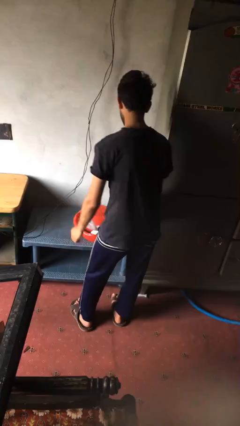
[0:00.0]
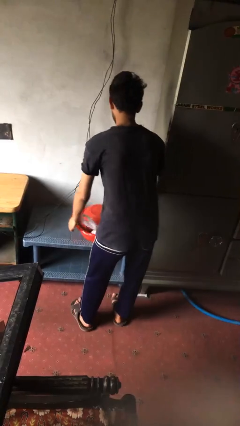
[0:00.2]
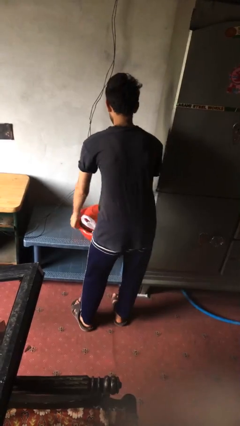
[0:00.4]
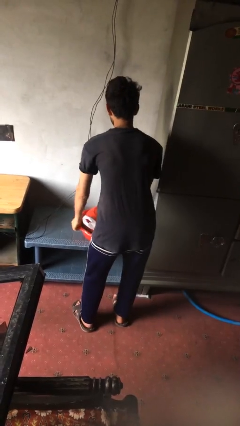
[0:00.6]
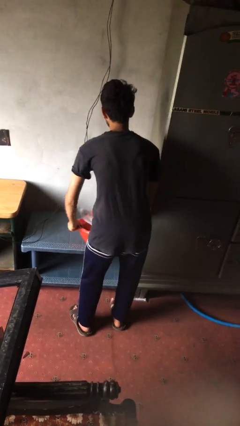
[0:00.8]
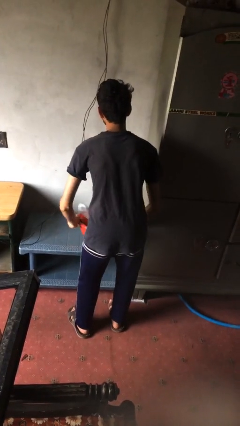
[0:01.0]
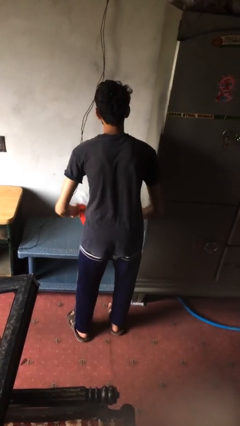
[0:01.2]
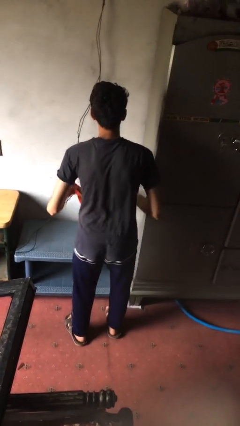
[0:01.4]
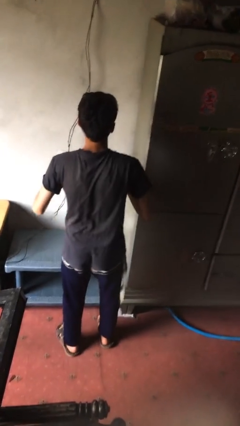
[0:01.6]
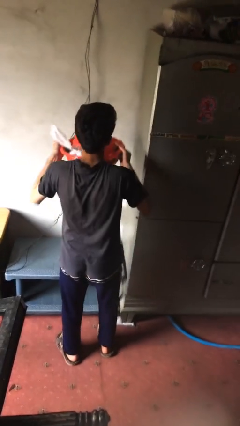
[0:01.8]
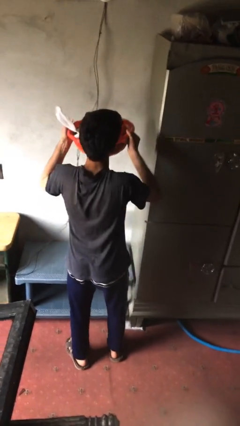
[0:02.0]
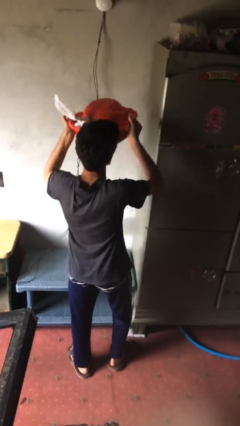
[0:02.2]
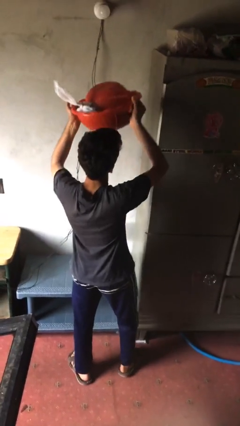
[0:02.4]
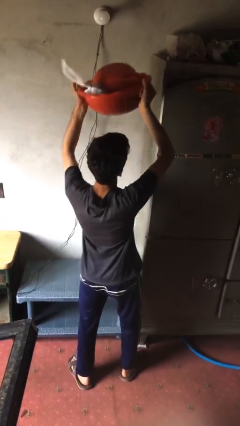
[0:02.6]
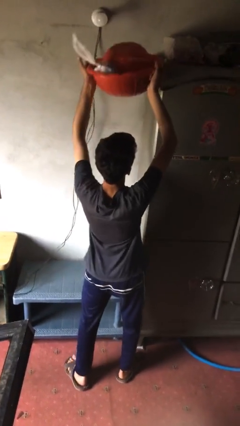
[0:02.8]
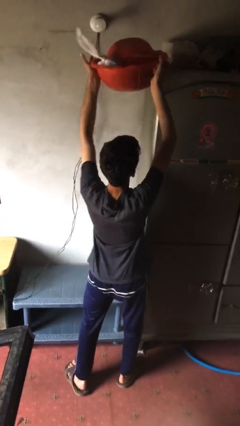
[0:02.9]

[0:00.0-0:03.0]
person picks up object from table

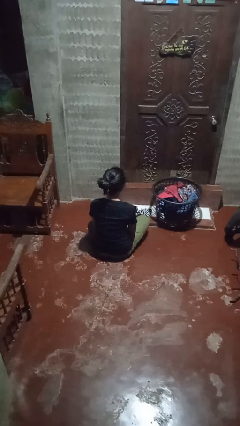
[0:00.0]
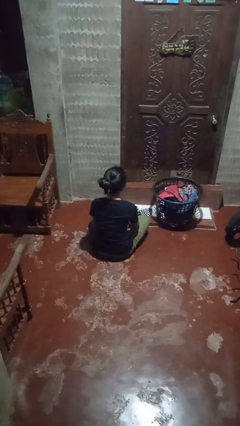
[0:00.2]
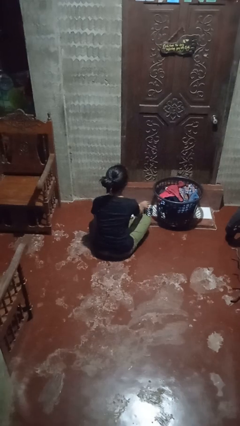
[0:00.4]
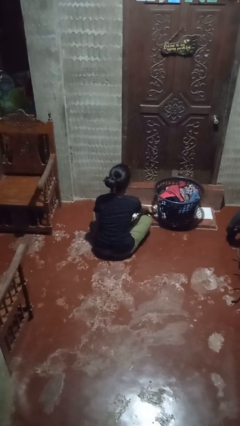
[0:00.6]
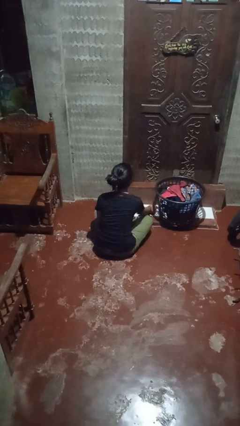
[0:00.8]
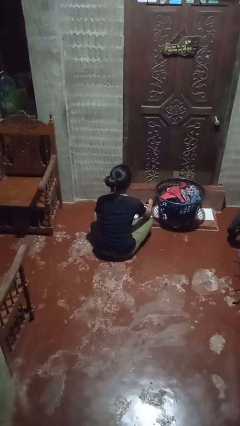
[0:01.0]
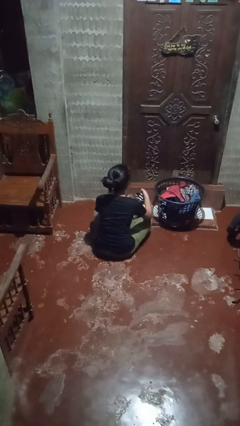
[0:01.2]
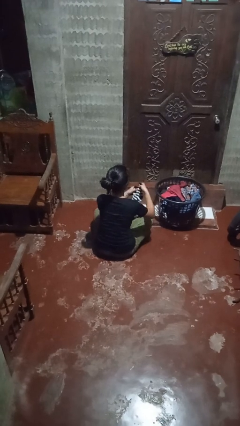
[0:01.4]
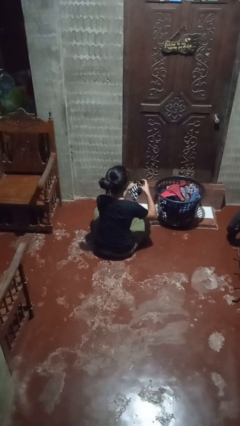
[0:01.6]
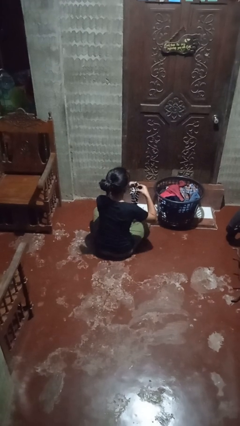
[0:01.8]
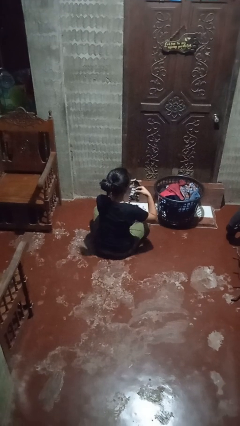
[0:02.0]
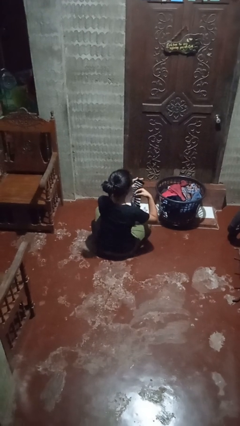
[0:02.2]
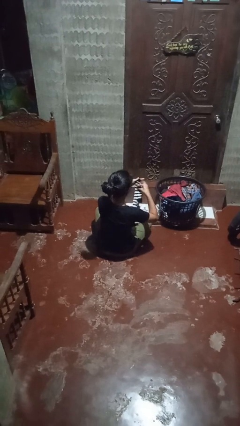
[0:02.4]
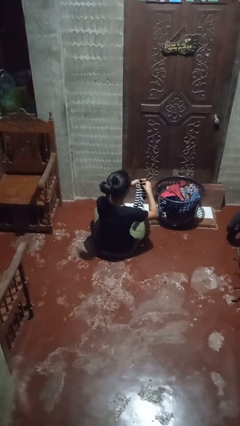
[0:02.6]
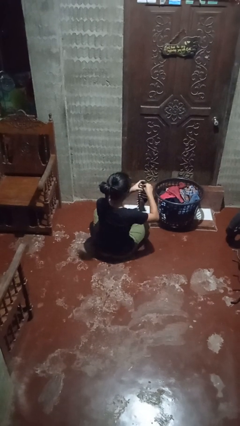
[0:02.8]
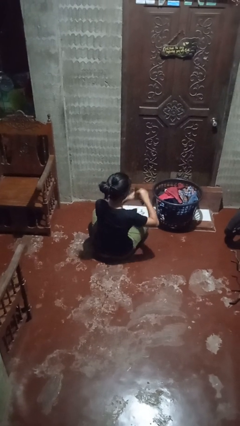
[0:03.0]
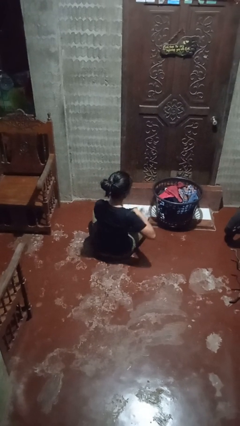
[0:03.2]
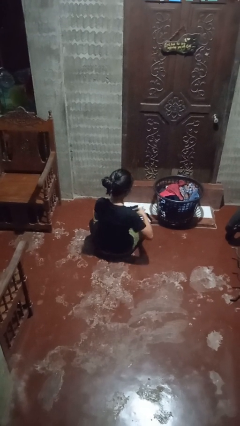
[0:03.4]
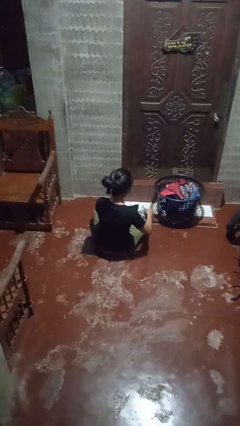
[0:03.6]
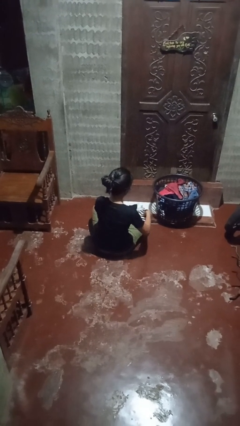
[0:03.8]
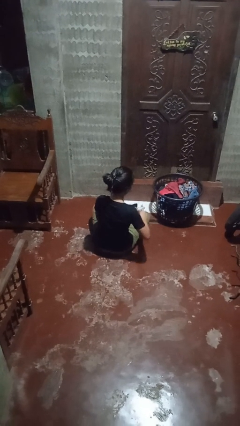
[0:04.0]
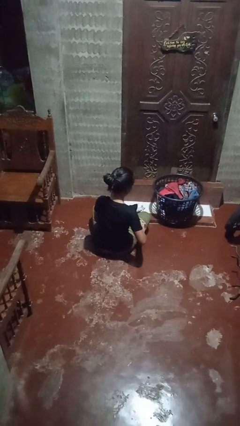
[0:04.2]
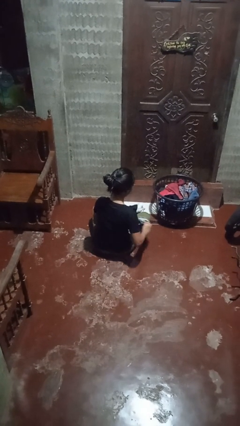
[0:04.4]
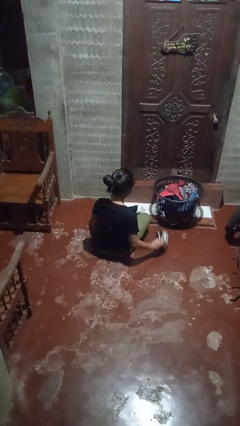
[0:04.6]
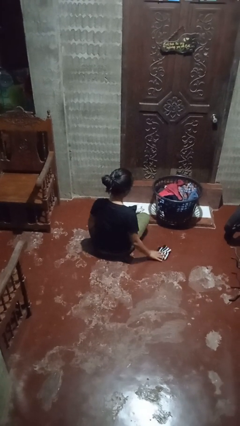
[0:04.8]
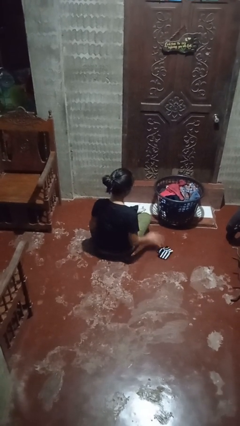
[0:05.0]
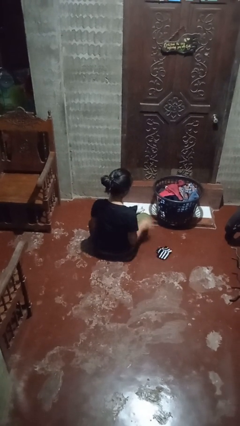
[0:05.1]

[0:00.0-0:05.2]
person folds socks

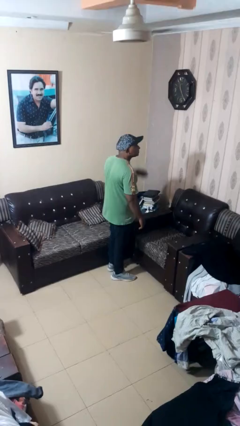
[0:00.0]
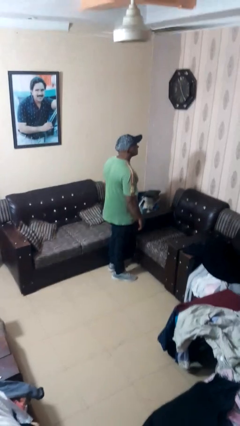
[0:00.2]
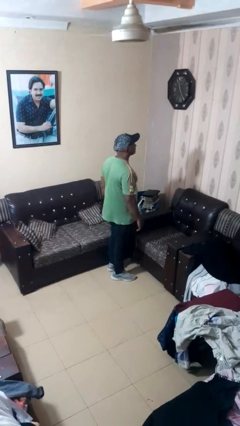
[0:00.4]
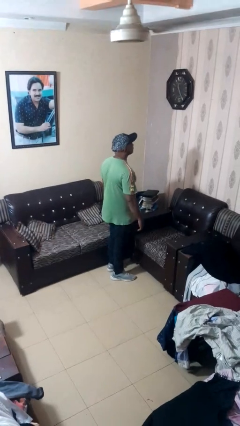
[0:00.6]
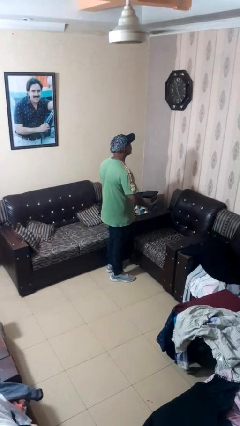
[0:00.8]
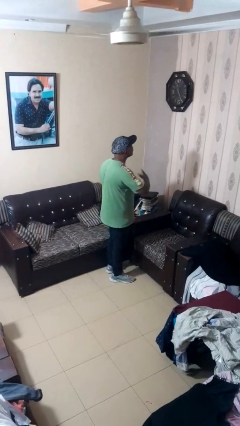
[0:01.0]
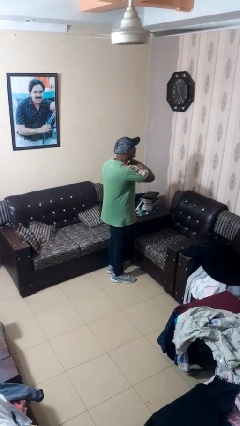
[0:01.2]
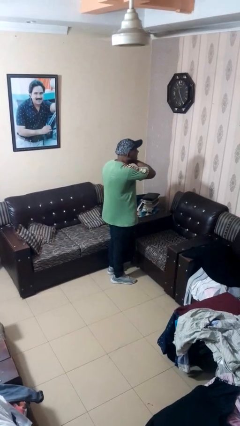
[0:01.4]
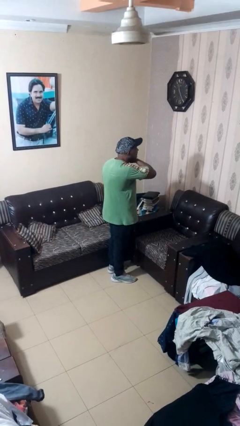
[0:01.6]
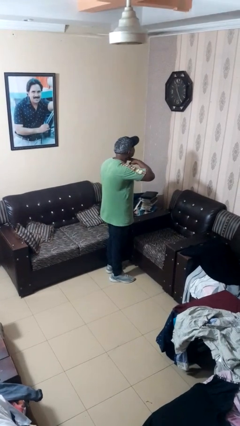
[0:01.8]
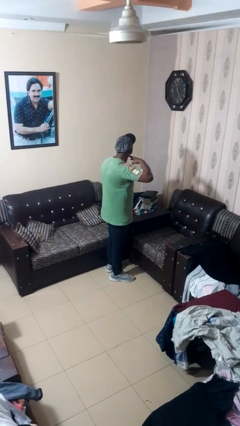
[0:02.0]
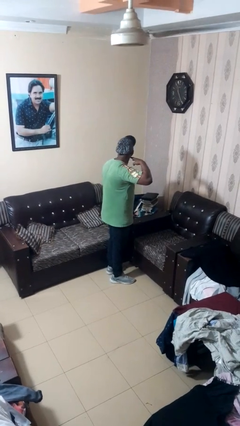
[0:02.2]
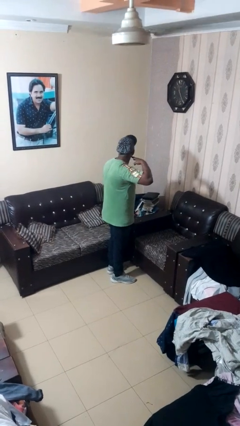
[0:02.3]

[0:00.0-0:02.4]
person gestures cut

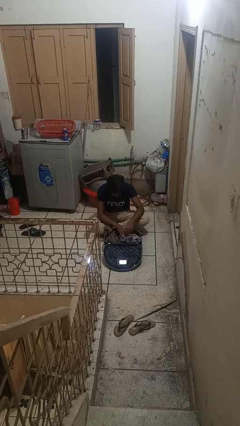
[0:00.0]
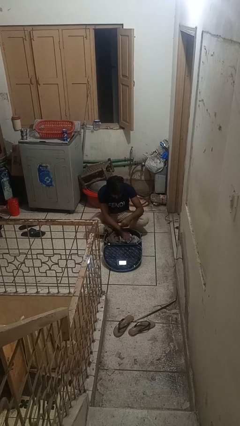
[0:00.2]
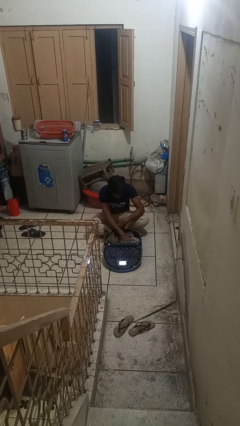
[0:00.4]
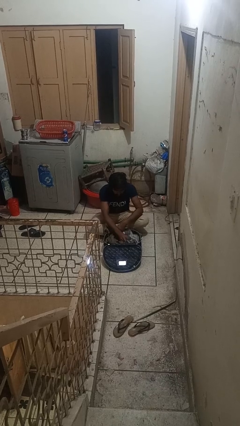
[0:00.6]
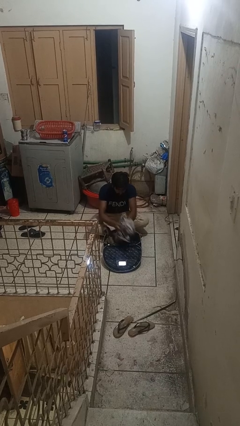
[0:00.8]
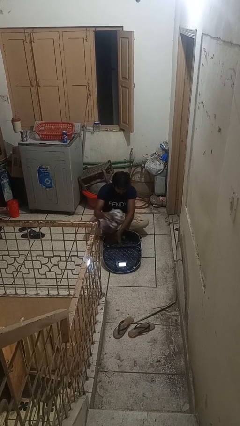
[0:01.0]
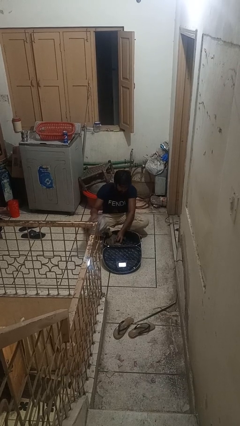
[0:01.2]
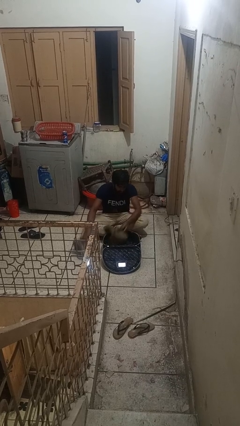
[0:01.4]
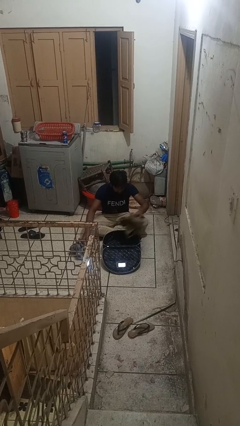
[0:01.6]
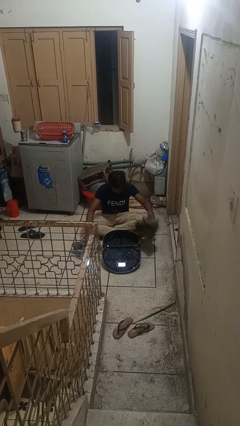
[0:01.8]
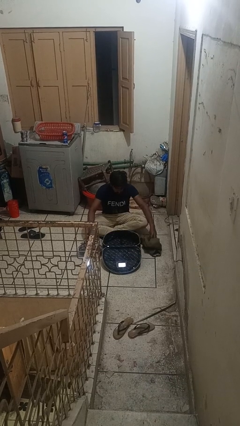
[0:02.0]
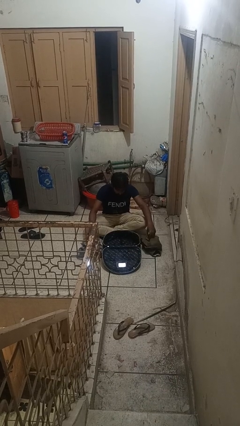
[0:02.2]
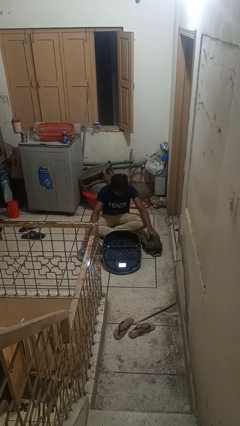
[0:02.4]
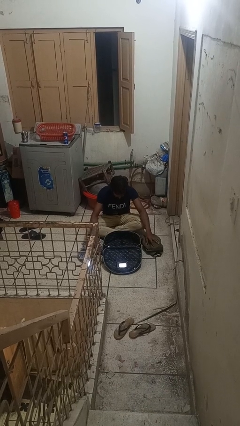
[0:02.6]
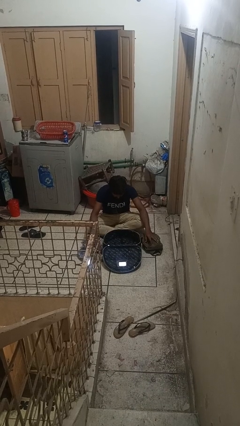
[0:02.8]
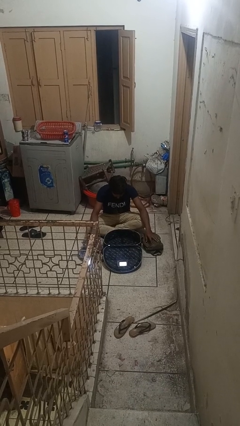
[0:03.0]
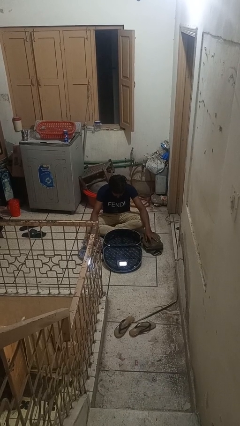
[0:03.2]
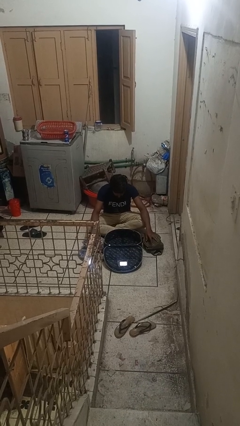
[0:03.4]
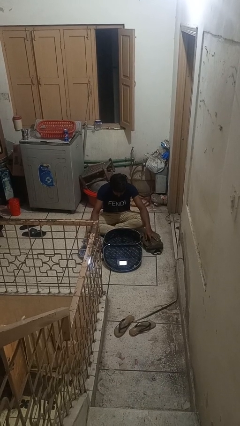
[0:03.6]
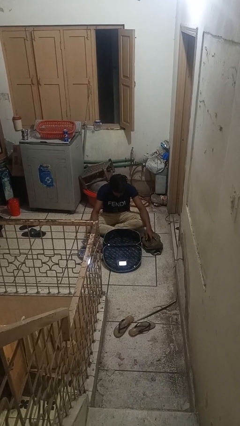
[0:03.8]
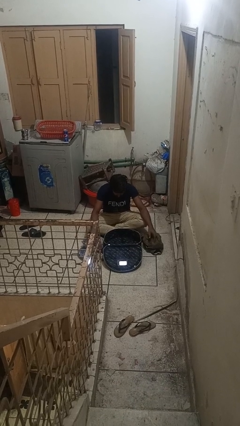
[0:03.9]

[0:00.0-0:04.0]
person unloads clothes from suitcase

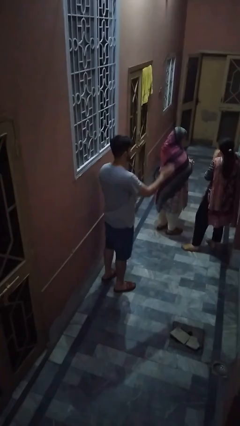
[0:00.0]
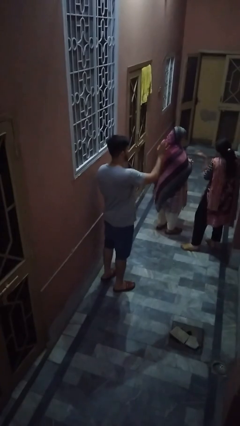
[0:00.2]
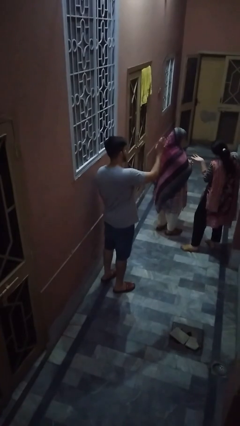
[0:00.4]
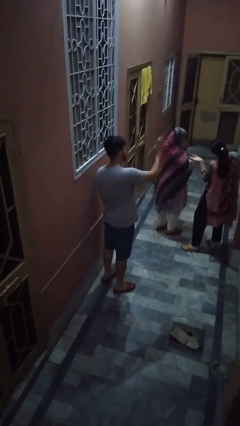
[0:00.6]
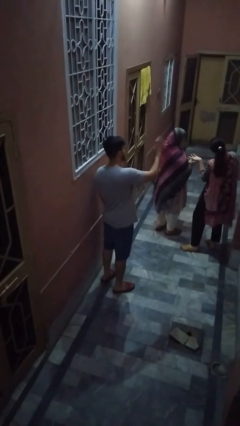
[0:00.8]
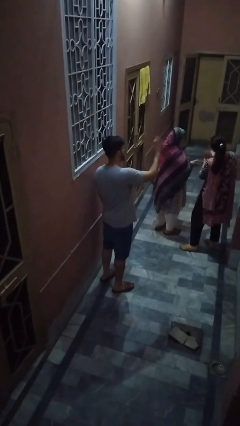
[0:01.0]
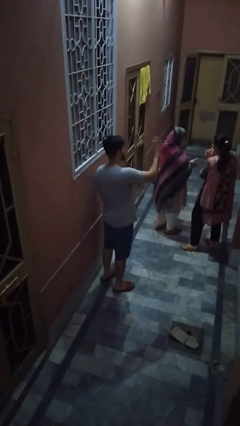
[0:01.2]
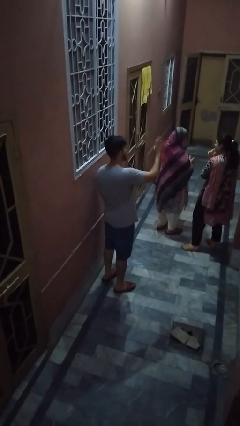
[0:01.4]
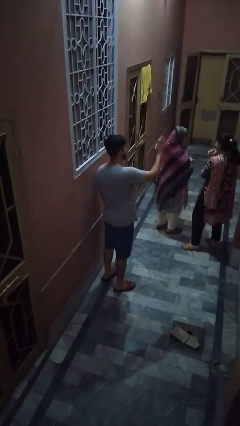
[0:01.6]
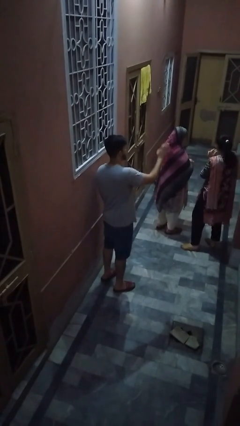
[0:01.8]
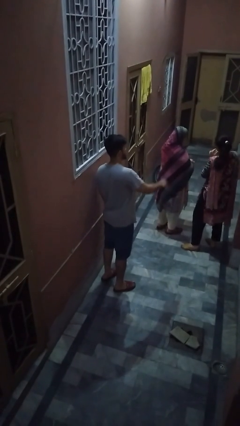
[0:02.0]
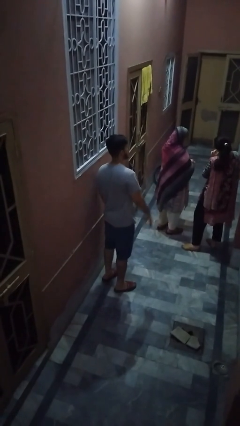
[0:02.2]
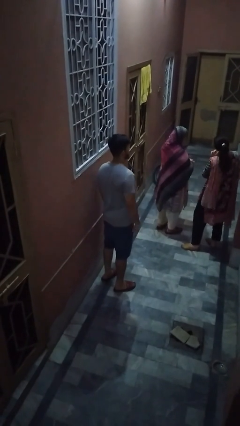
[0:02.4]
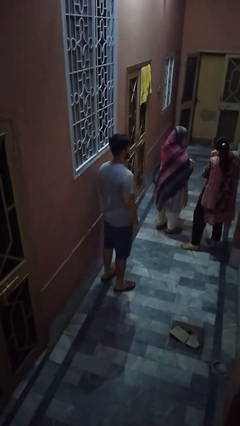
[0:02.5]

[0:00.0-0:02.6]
person waves at person

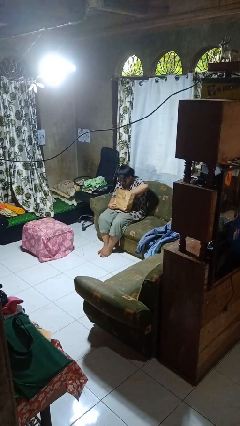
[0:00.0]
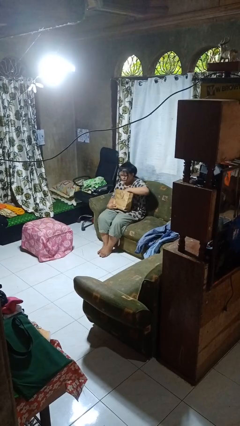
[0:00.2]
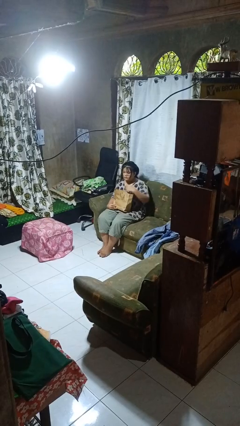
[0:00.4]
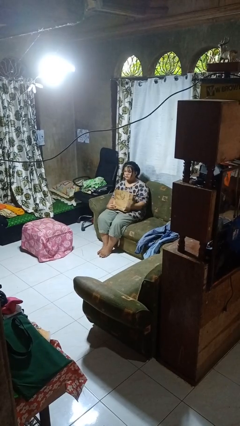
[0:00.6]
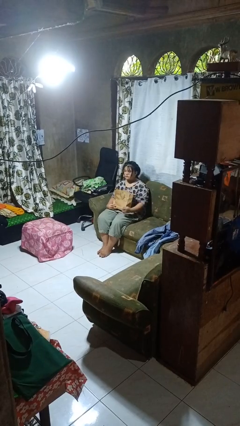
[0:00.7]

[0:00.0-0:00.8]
person searches in bag
